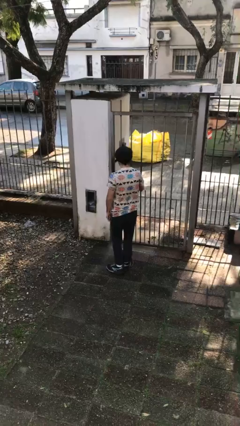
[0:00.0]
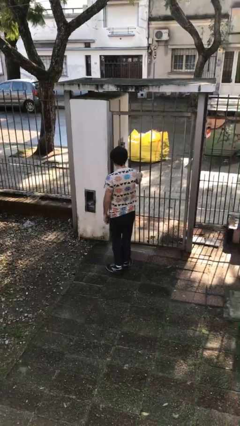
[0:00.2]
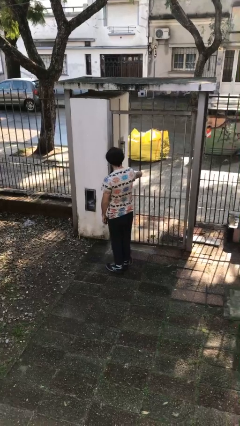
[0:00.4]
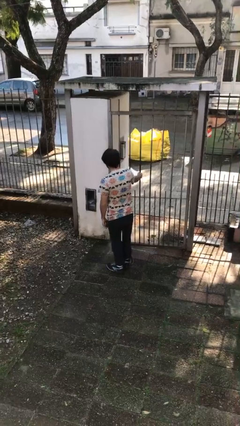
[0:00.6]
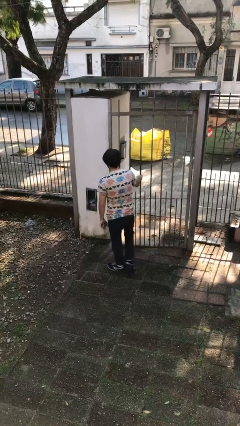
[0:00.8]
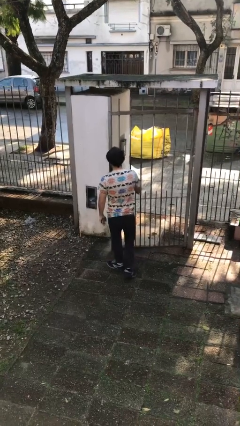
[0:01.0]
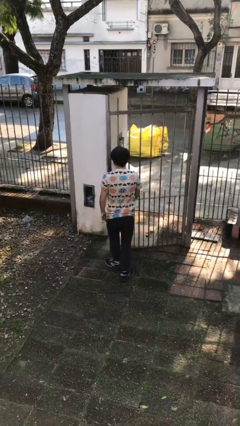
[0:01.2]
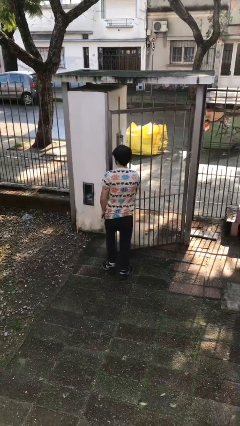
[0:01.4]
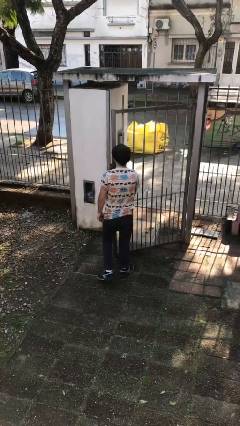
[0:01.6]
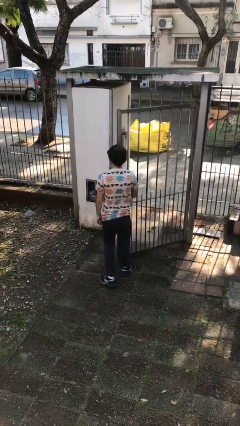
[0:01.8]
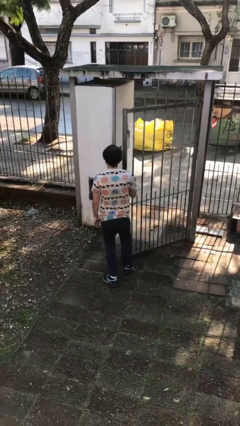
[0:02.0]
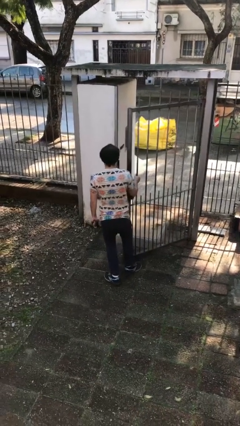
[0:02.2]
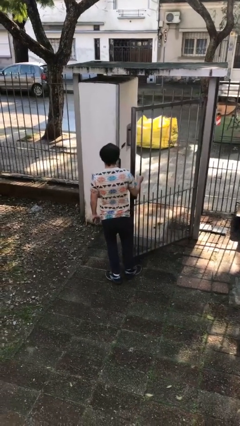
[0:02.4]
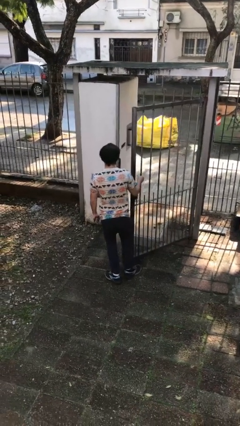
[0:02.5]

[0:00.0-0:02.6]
person opens gate

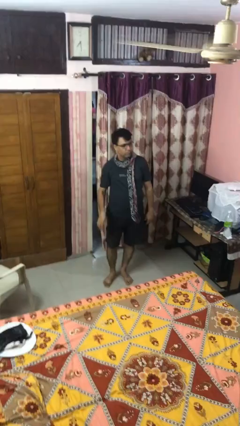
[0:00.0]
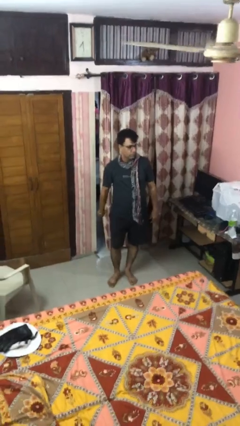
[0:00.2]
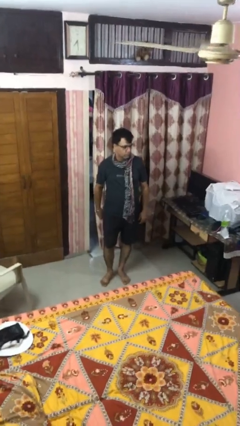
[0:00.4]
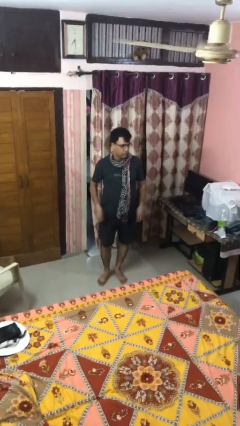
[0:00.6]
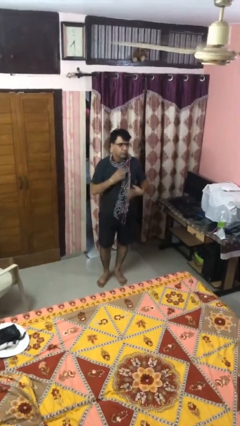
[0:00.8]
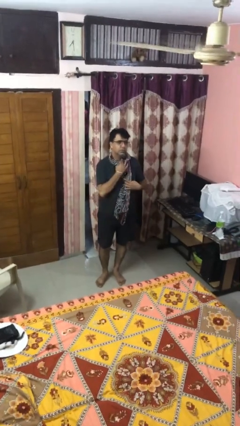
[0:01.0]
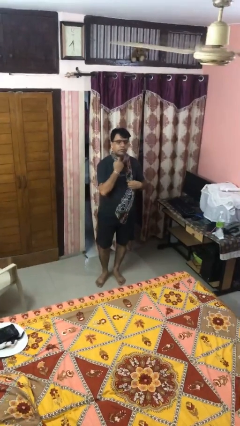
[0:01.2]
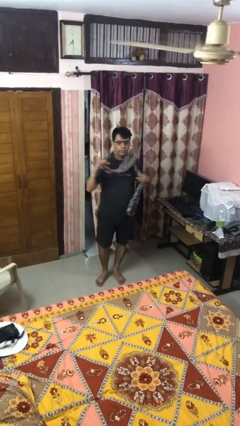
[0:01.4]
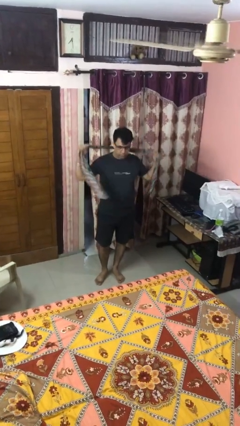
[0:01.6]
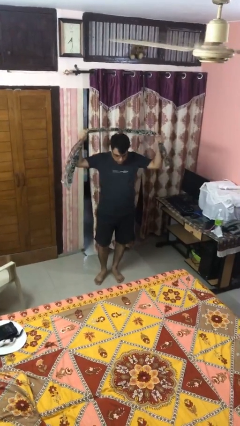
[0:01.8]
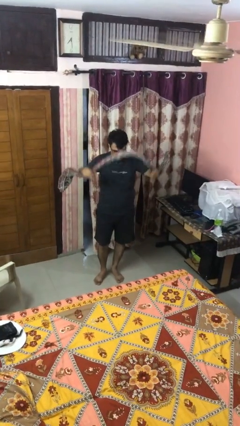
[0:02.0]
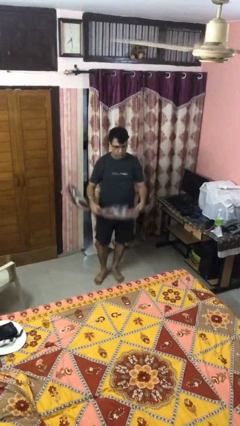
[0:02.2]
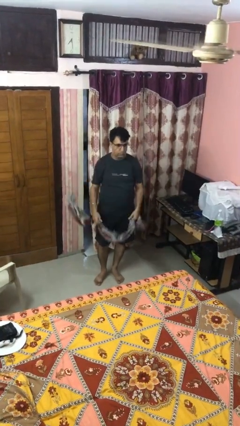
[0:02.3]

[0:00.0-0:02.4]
person takes off scarf

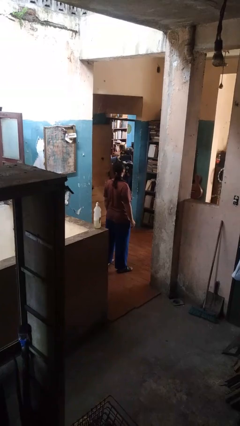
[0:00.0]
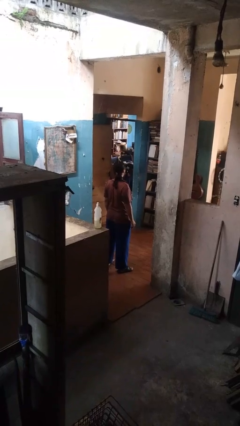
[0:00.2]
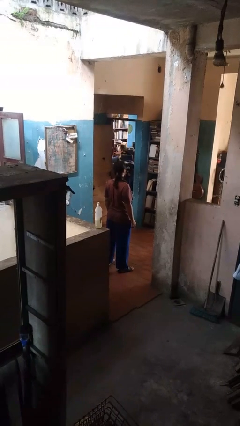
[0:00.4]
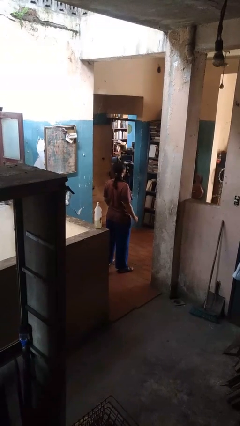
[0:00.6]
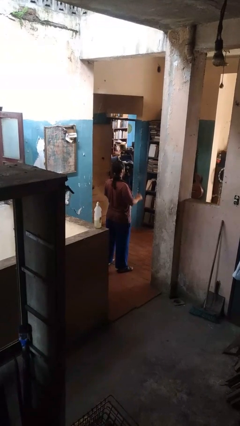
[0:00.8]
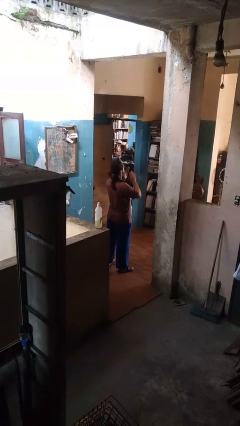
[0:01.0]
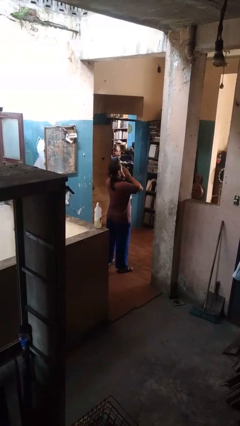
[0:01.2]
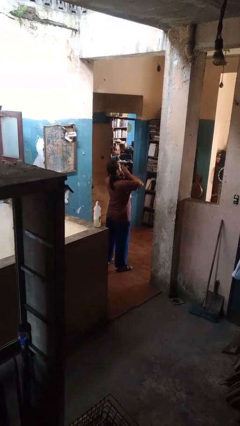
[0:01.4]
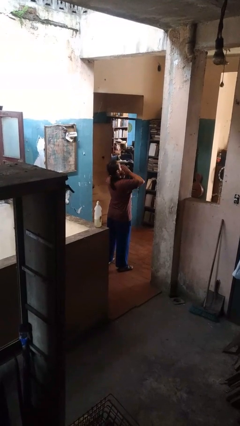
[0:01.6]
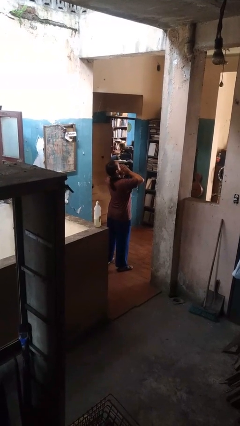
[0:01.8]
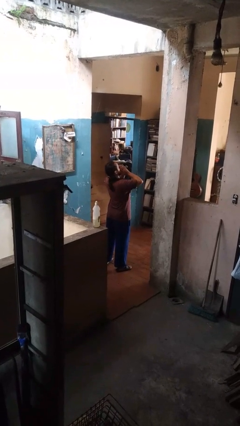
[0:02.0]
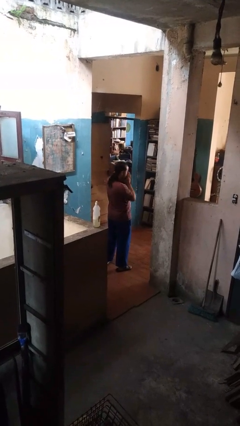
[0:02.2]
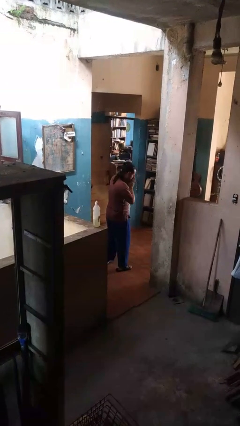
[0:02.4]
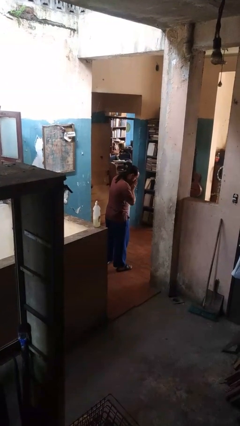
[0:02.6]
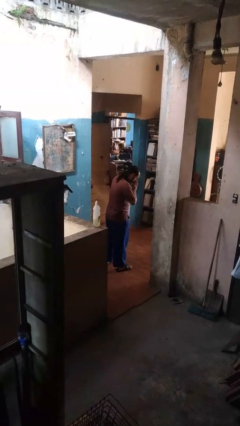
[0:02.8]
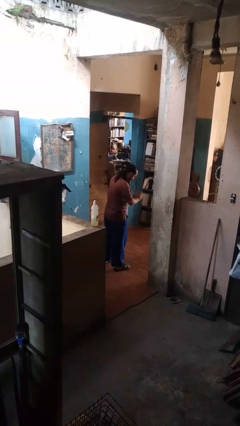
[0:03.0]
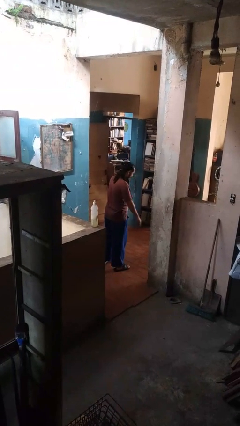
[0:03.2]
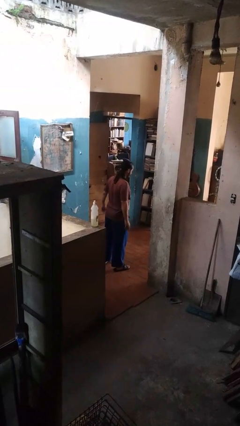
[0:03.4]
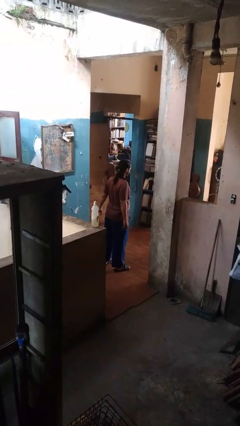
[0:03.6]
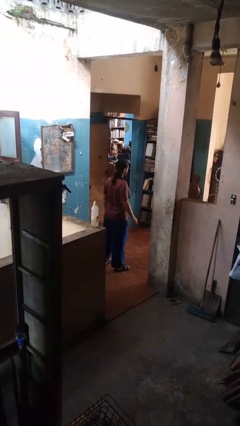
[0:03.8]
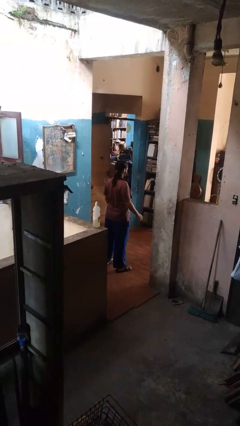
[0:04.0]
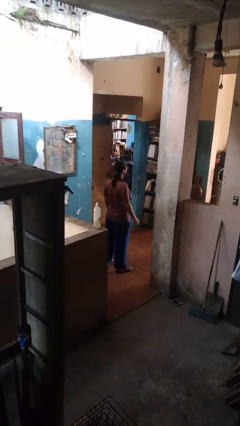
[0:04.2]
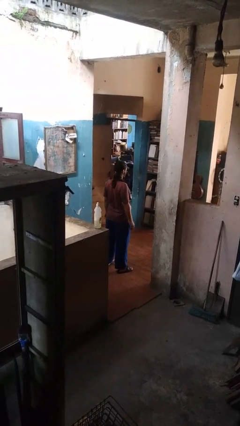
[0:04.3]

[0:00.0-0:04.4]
person sneezes into hand

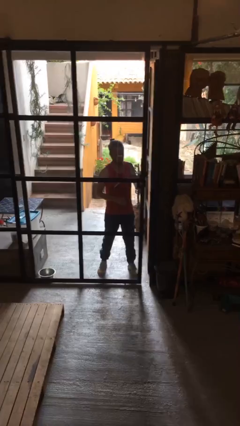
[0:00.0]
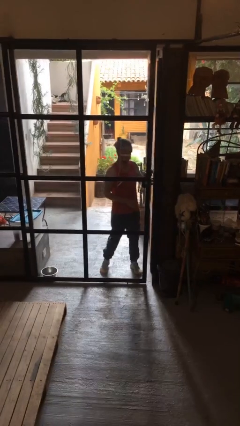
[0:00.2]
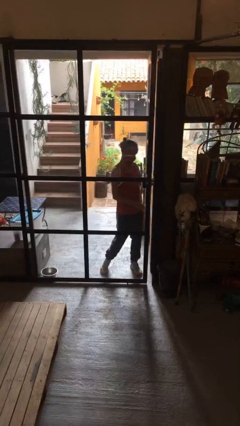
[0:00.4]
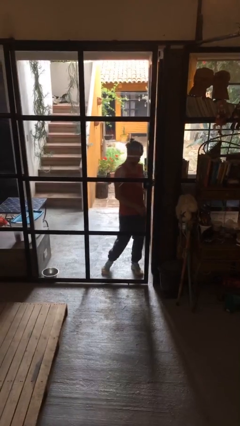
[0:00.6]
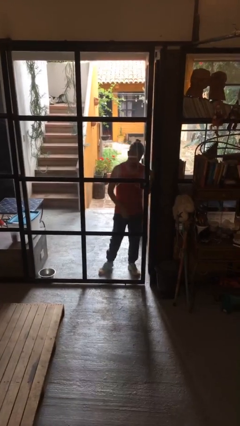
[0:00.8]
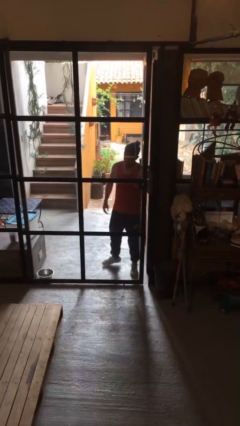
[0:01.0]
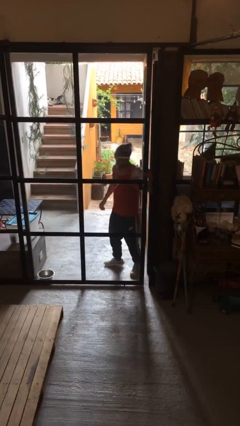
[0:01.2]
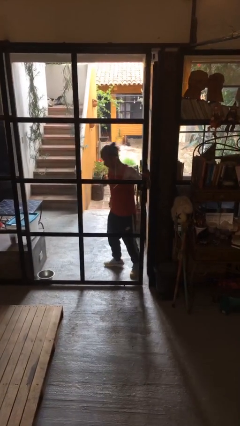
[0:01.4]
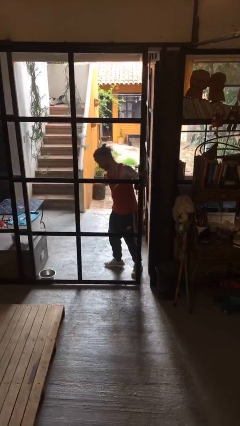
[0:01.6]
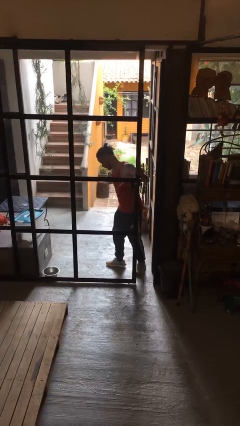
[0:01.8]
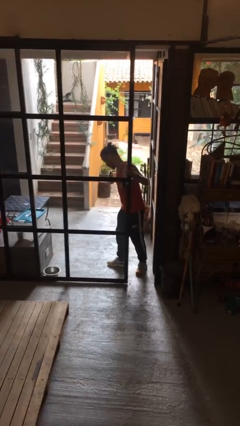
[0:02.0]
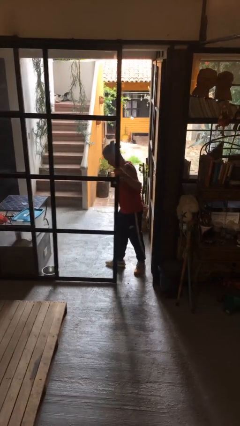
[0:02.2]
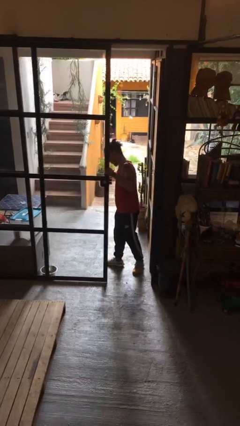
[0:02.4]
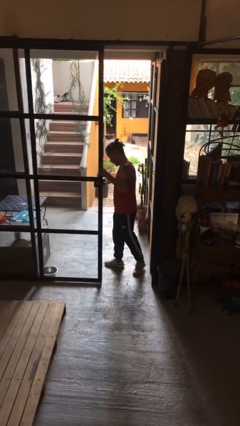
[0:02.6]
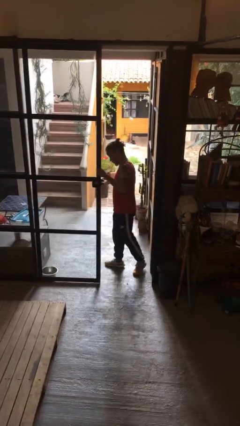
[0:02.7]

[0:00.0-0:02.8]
person opens sliding door

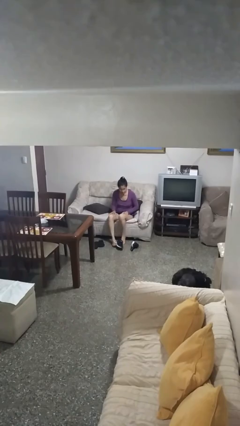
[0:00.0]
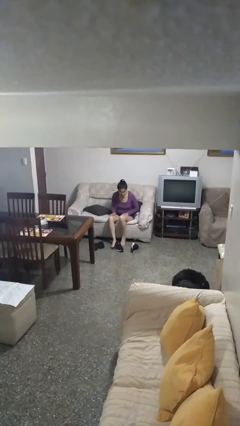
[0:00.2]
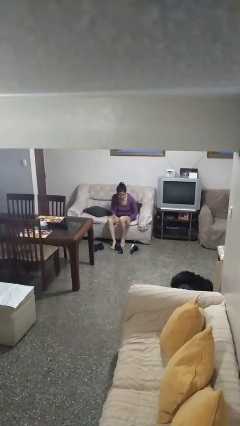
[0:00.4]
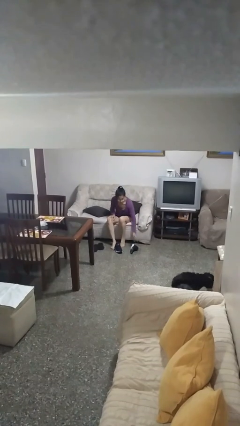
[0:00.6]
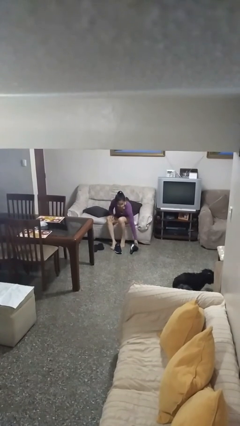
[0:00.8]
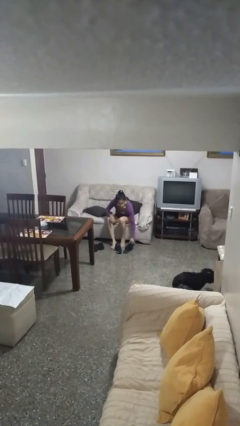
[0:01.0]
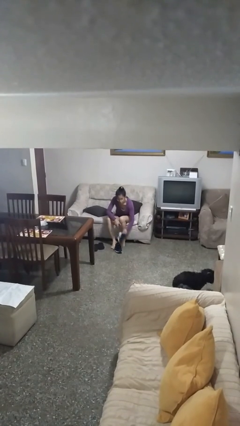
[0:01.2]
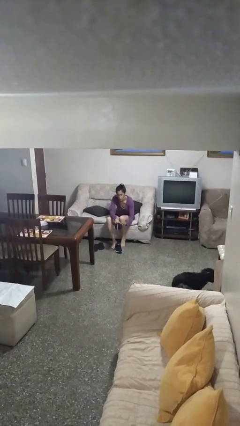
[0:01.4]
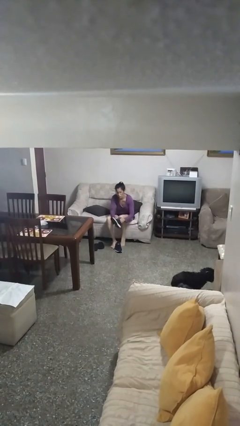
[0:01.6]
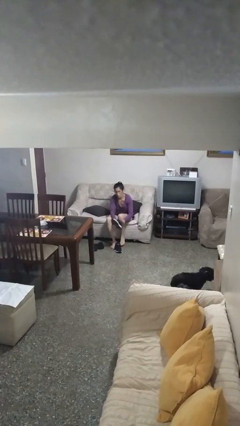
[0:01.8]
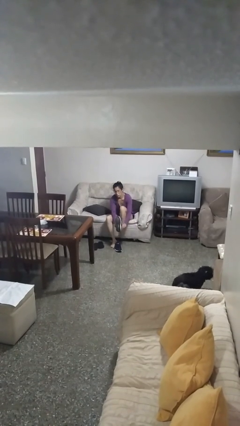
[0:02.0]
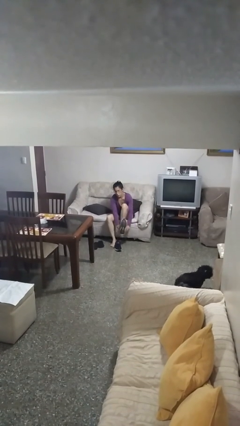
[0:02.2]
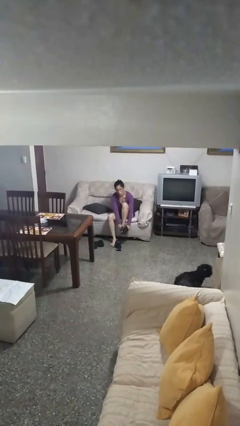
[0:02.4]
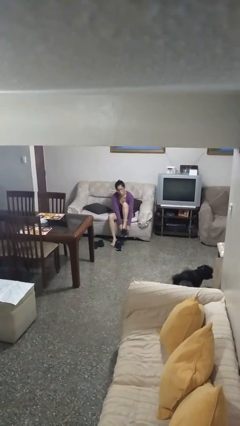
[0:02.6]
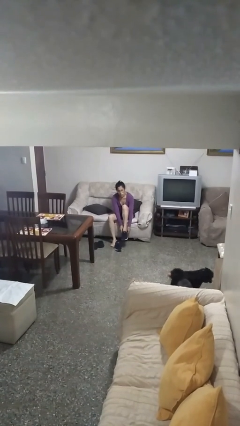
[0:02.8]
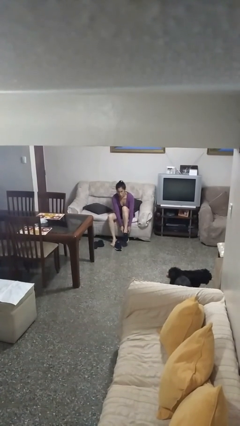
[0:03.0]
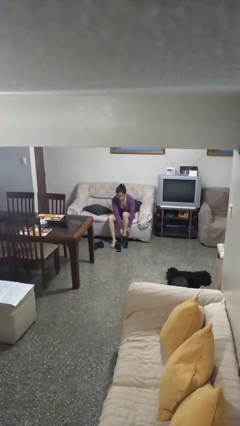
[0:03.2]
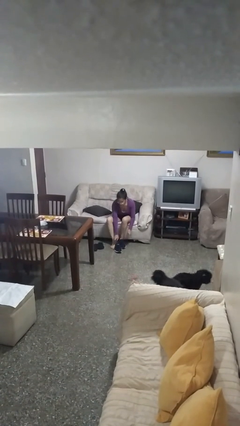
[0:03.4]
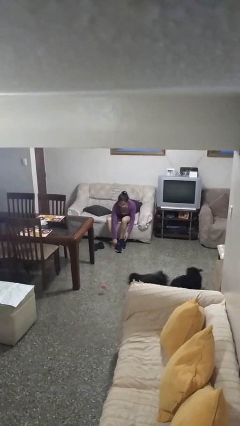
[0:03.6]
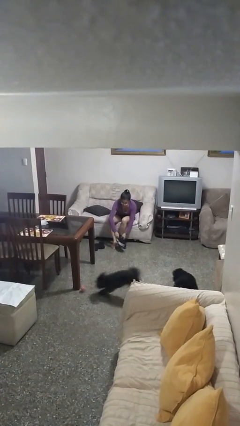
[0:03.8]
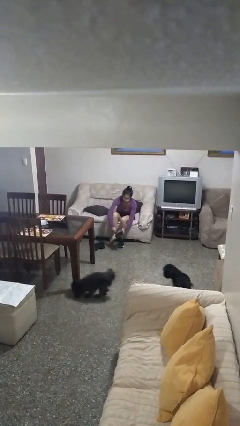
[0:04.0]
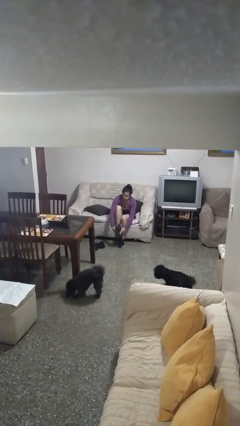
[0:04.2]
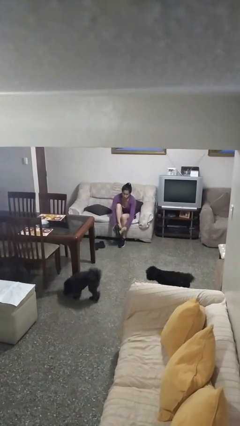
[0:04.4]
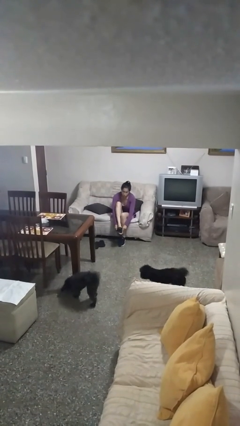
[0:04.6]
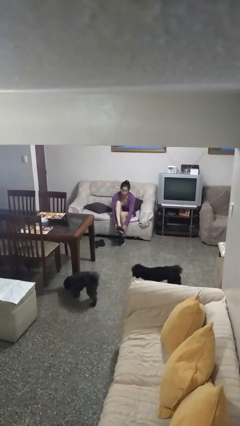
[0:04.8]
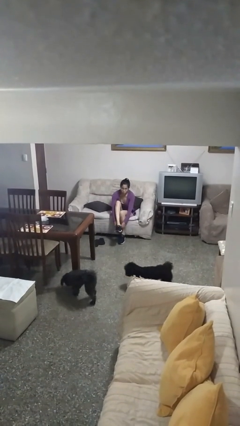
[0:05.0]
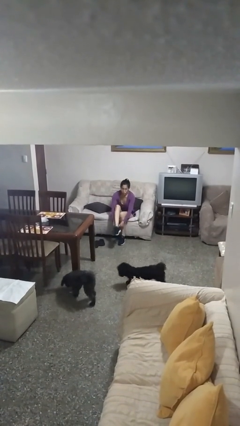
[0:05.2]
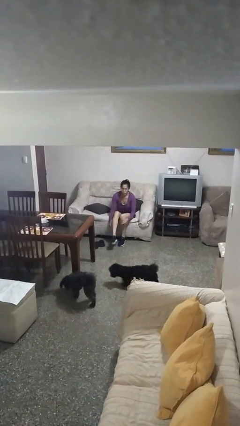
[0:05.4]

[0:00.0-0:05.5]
person puts on shoes
